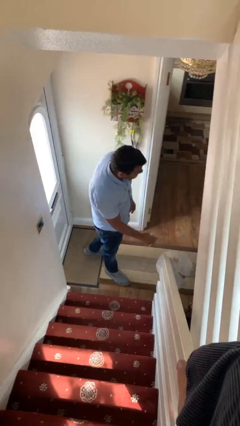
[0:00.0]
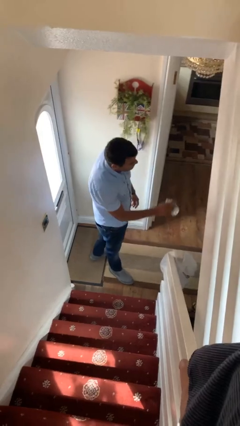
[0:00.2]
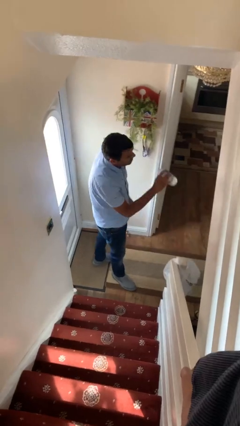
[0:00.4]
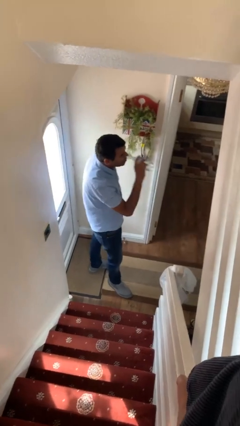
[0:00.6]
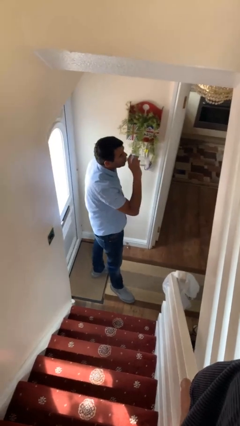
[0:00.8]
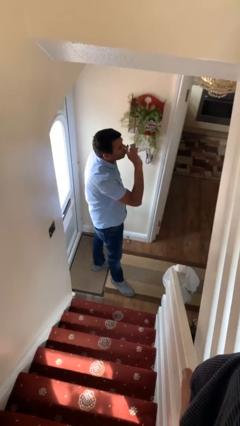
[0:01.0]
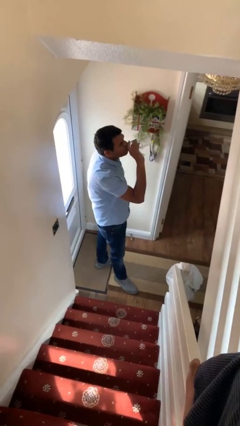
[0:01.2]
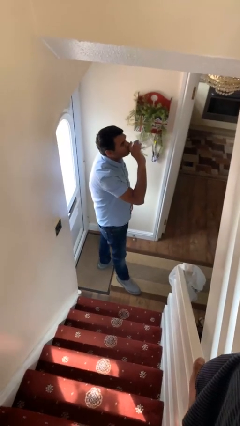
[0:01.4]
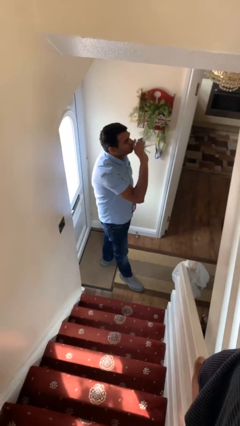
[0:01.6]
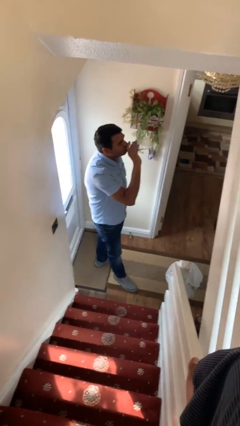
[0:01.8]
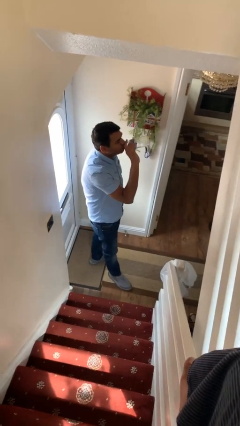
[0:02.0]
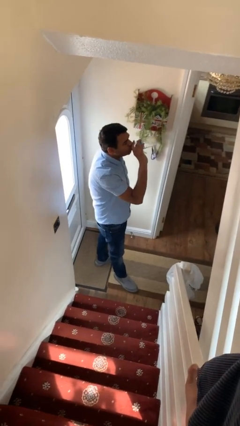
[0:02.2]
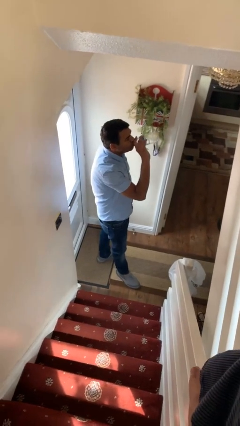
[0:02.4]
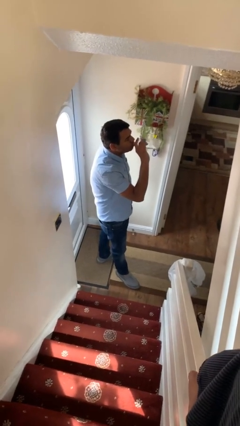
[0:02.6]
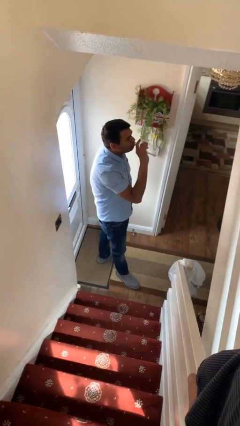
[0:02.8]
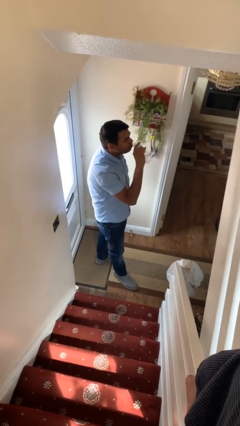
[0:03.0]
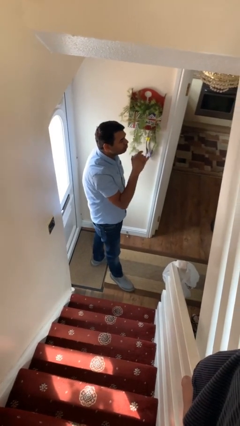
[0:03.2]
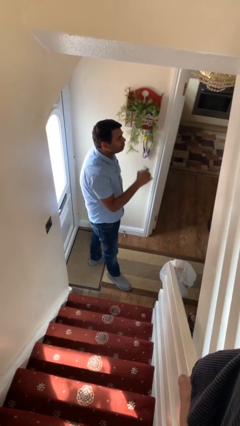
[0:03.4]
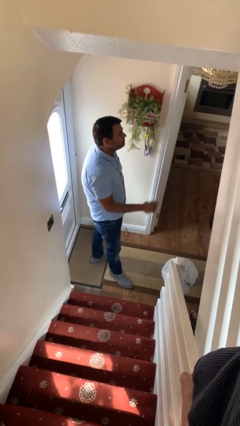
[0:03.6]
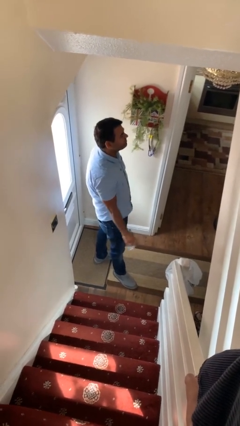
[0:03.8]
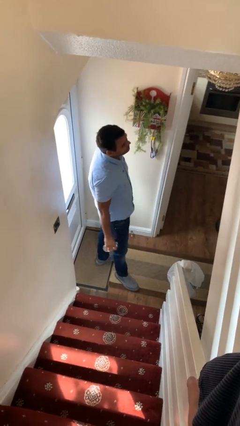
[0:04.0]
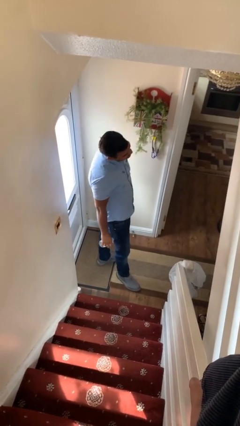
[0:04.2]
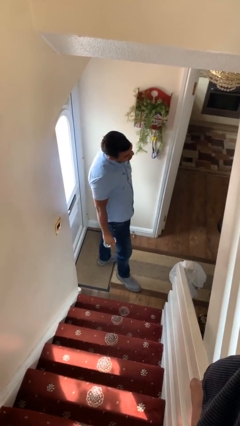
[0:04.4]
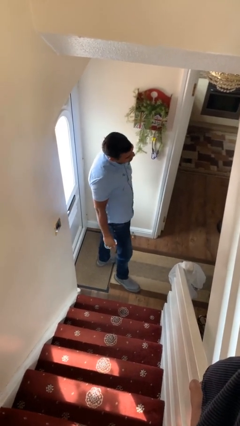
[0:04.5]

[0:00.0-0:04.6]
person drinks from bottle

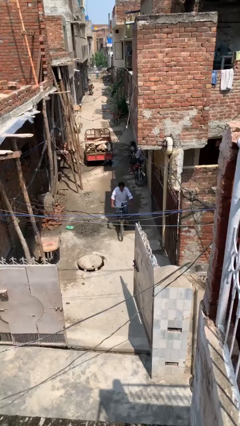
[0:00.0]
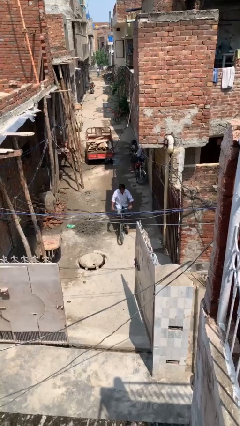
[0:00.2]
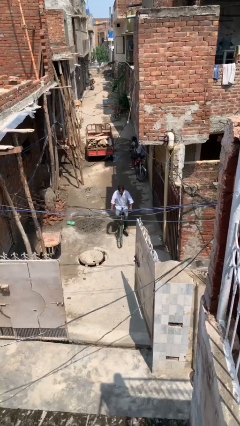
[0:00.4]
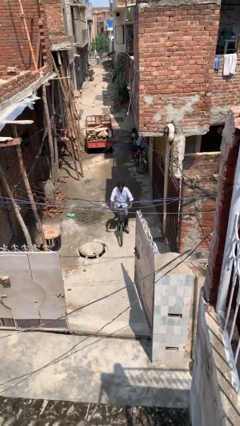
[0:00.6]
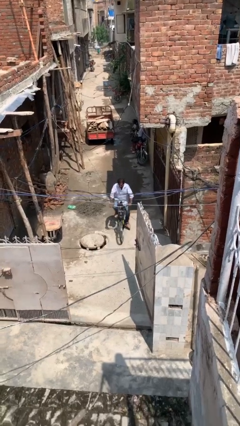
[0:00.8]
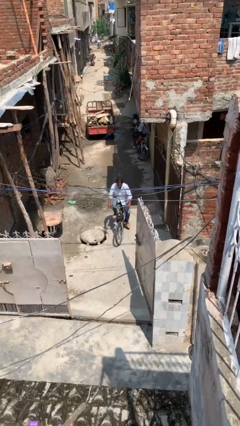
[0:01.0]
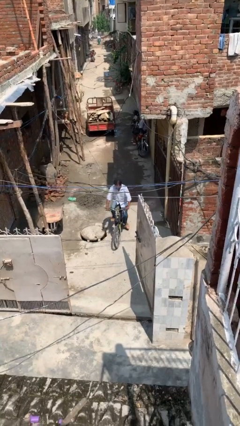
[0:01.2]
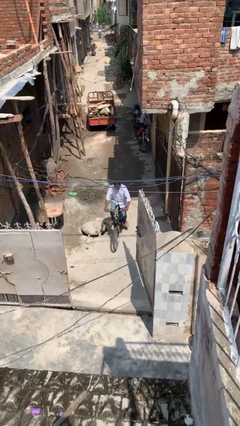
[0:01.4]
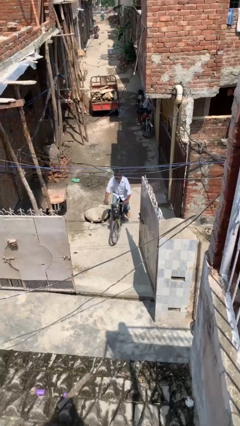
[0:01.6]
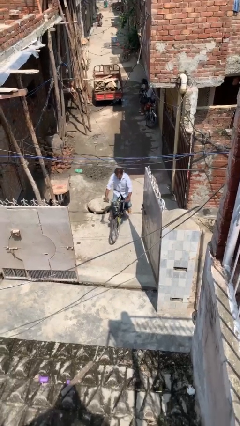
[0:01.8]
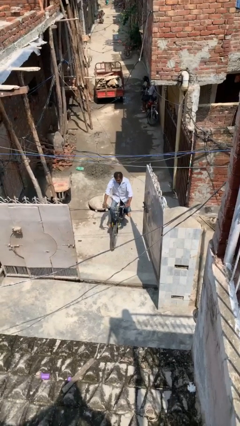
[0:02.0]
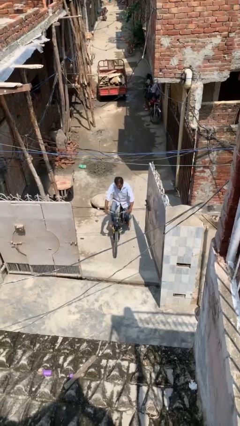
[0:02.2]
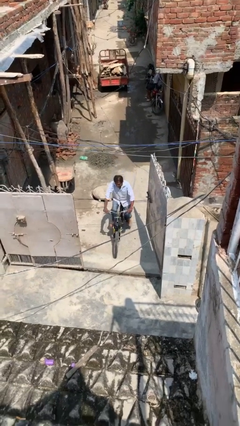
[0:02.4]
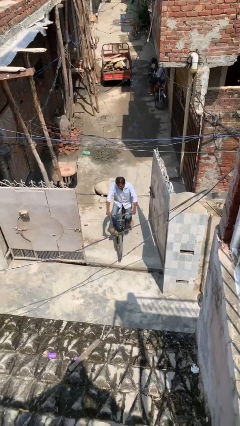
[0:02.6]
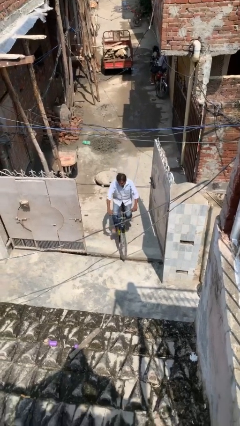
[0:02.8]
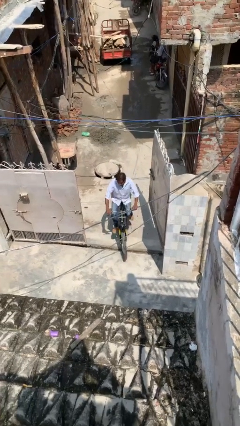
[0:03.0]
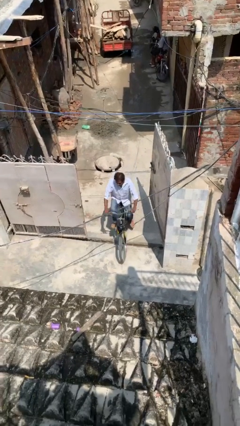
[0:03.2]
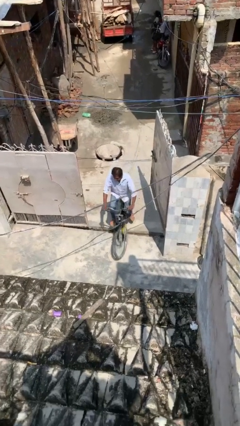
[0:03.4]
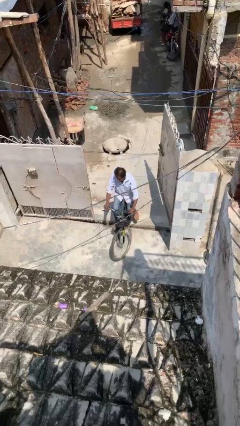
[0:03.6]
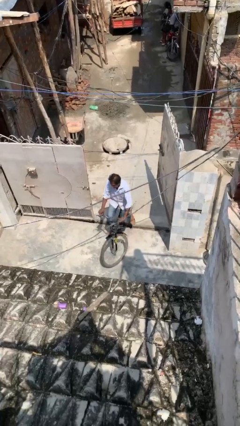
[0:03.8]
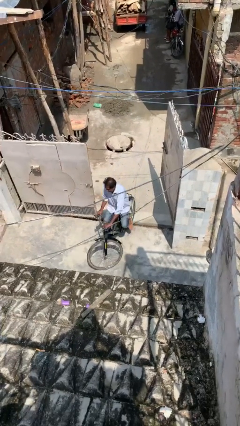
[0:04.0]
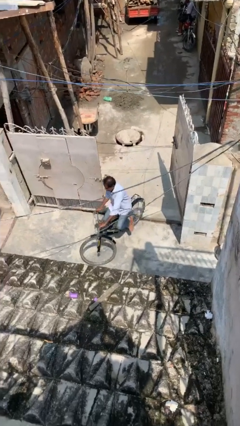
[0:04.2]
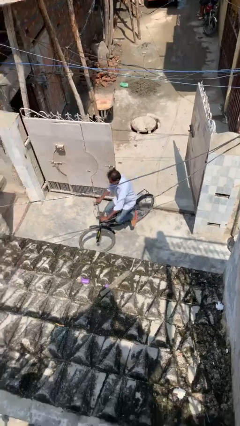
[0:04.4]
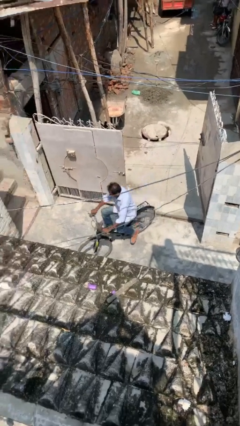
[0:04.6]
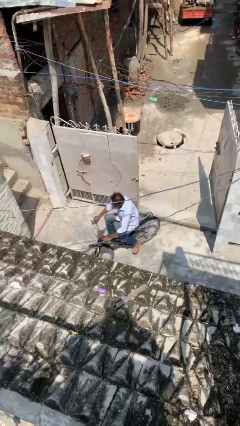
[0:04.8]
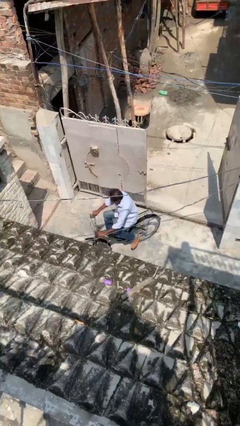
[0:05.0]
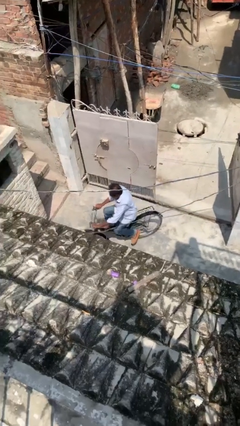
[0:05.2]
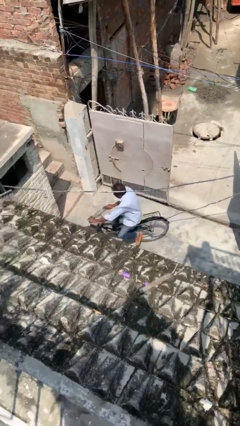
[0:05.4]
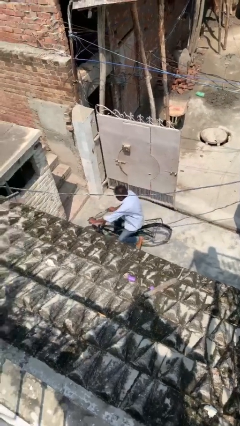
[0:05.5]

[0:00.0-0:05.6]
person rides bicycle

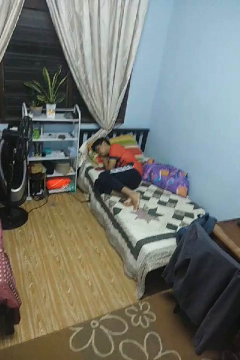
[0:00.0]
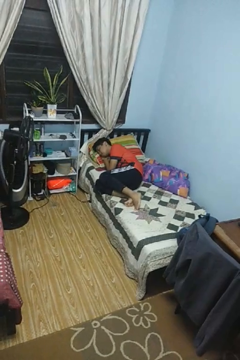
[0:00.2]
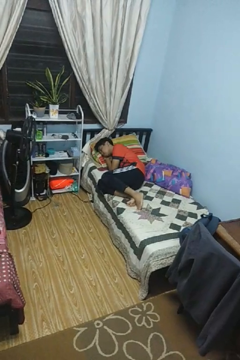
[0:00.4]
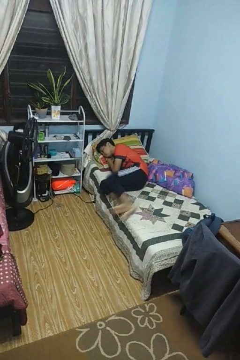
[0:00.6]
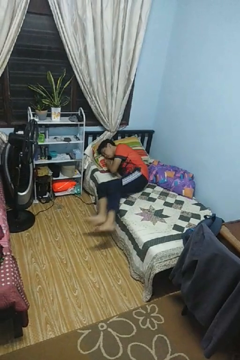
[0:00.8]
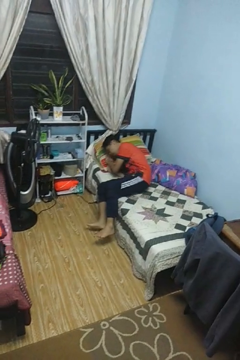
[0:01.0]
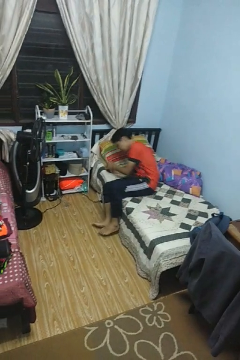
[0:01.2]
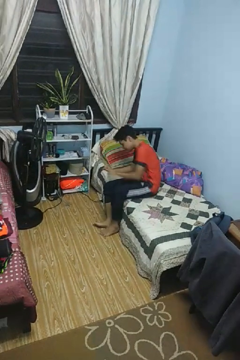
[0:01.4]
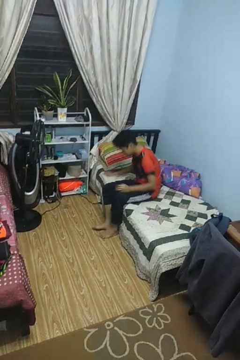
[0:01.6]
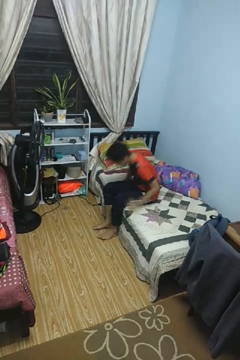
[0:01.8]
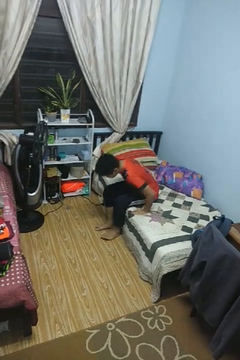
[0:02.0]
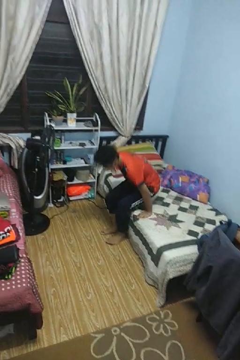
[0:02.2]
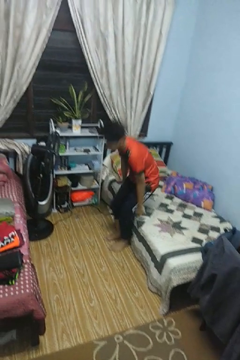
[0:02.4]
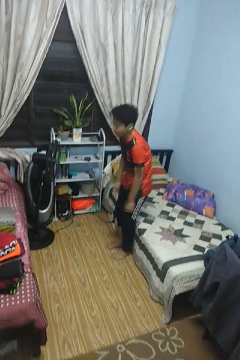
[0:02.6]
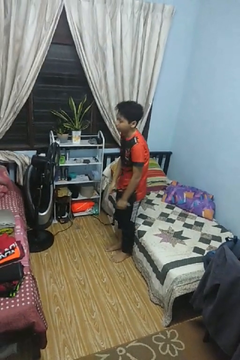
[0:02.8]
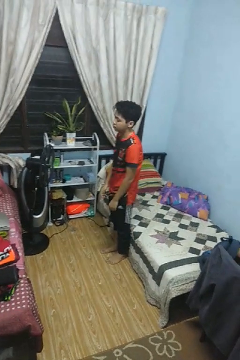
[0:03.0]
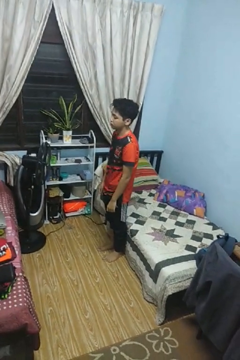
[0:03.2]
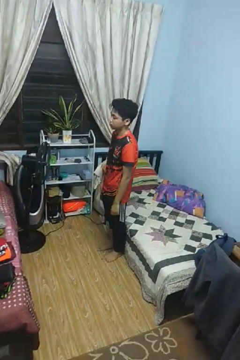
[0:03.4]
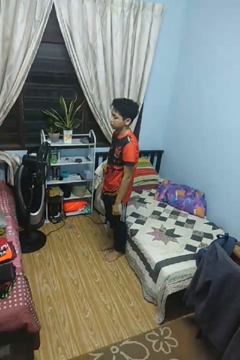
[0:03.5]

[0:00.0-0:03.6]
person stands up

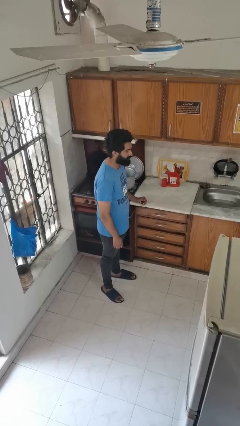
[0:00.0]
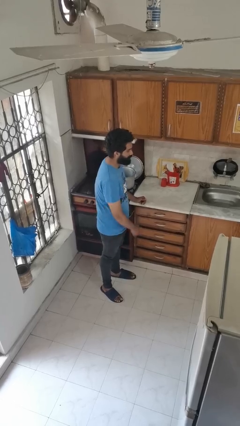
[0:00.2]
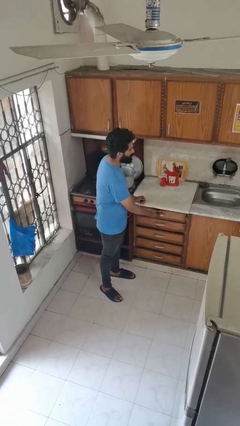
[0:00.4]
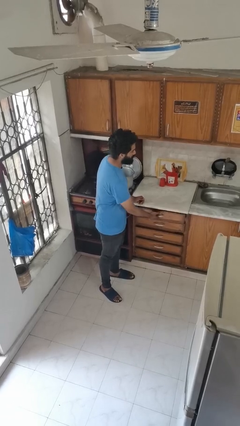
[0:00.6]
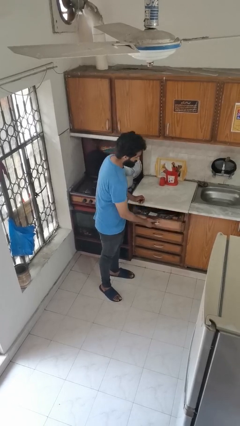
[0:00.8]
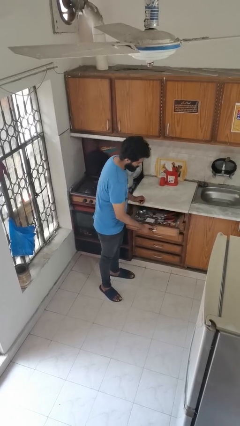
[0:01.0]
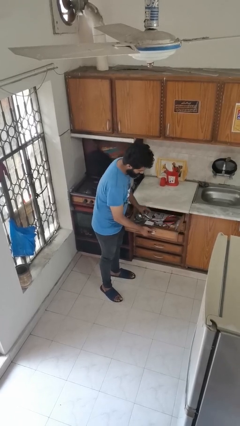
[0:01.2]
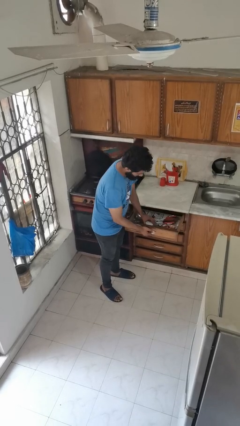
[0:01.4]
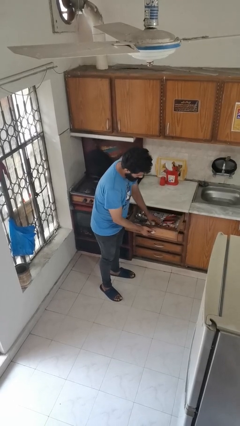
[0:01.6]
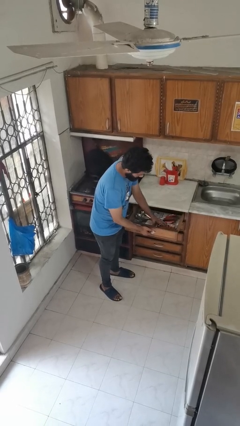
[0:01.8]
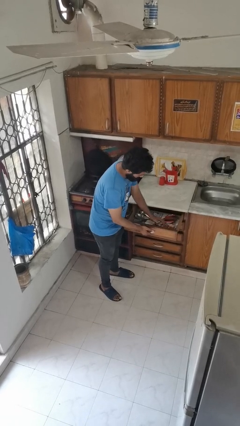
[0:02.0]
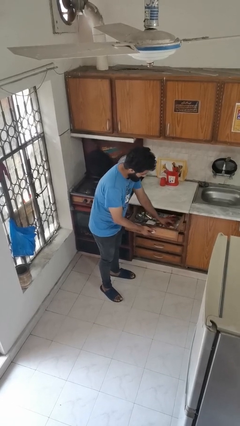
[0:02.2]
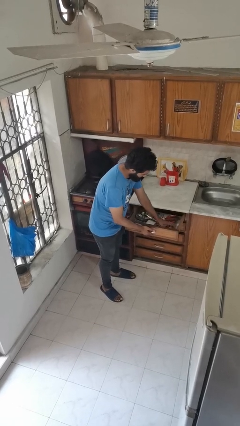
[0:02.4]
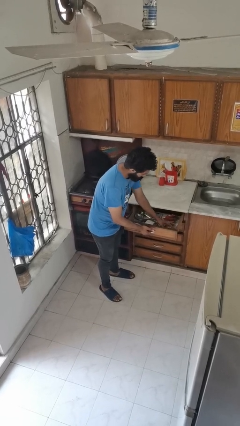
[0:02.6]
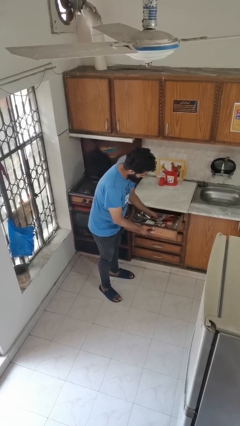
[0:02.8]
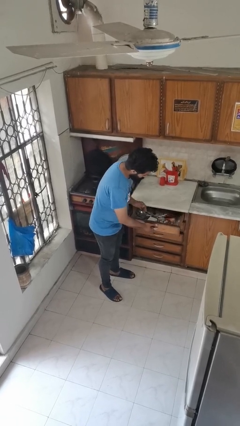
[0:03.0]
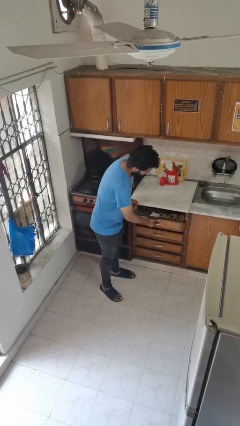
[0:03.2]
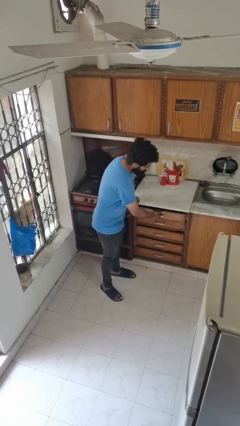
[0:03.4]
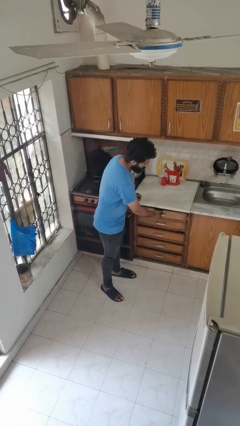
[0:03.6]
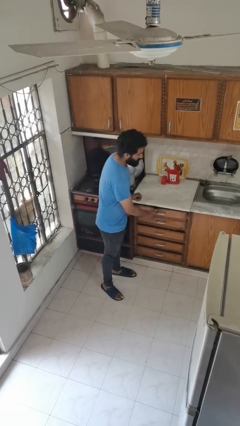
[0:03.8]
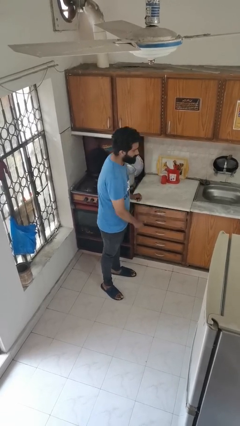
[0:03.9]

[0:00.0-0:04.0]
person searches in kitchen drawer

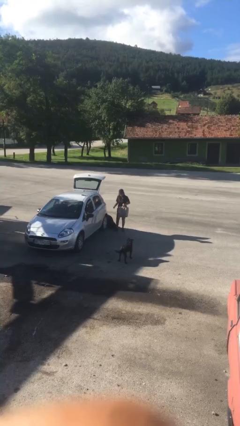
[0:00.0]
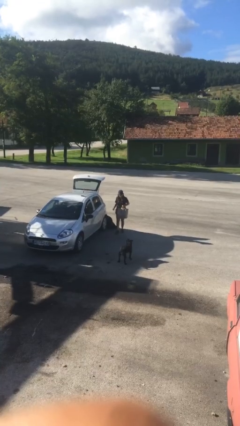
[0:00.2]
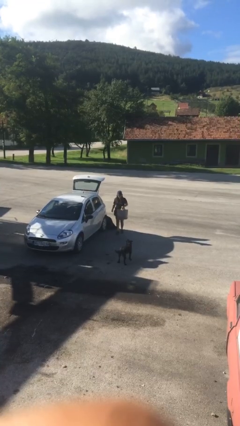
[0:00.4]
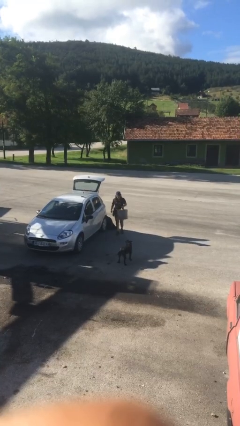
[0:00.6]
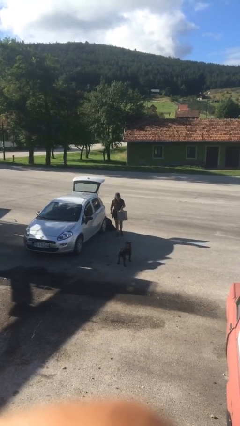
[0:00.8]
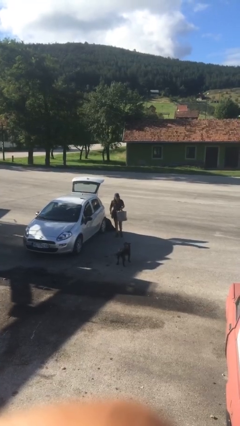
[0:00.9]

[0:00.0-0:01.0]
person opens car door
